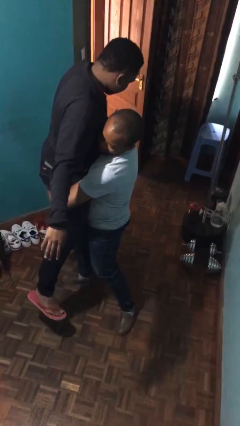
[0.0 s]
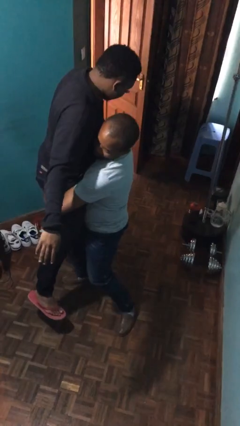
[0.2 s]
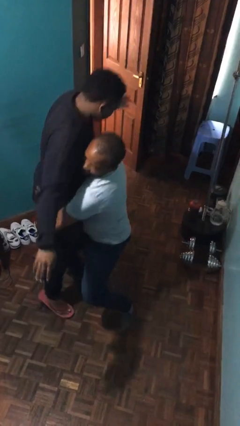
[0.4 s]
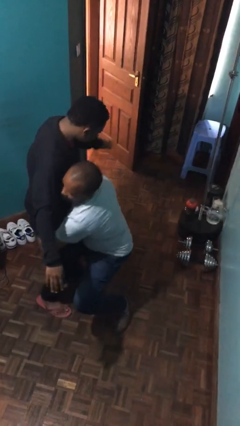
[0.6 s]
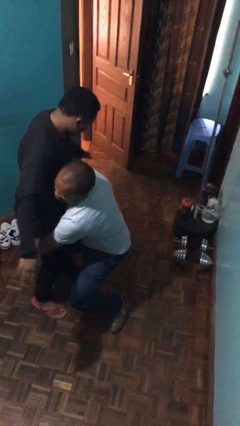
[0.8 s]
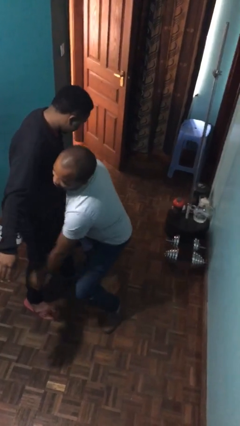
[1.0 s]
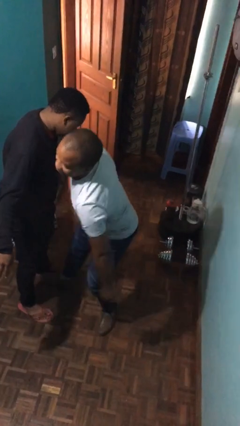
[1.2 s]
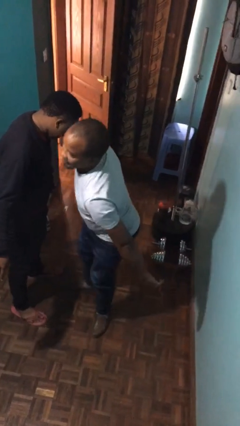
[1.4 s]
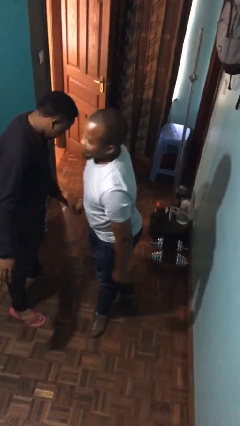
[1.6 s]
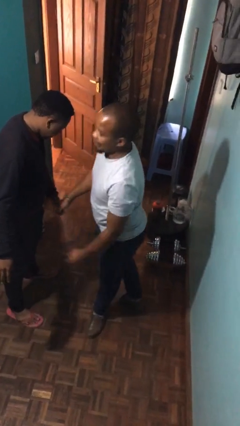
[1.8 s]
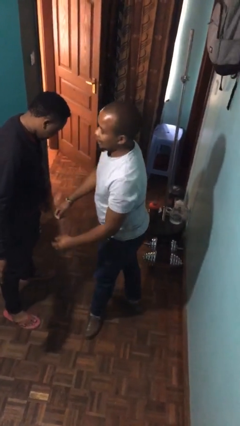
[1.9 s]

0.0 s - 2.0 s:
person puts down person

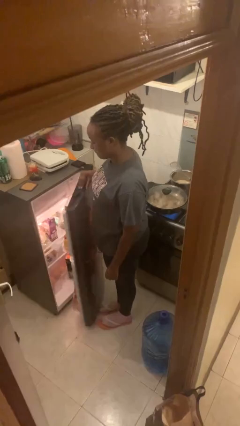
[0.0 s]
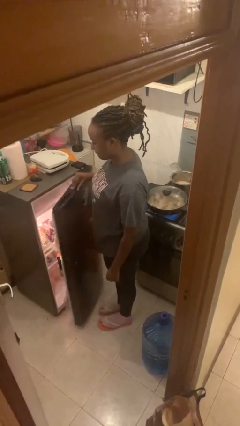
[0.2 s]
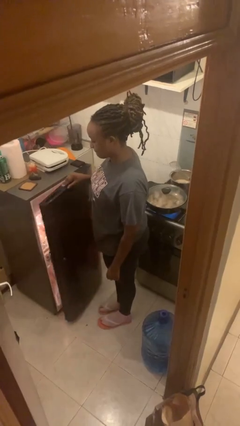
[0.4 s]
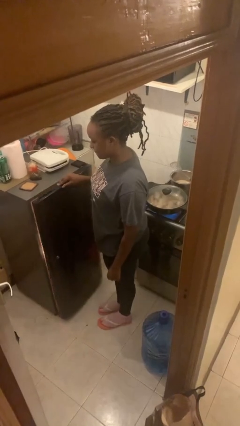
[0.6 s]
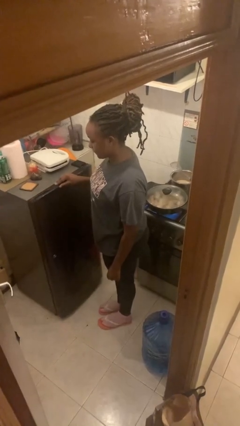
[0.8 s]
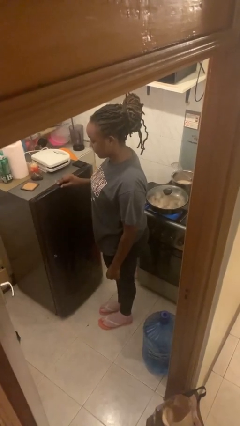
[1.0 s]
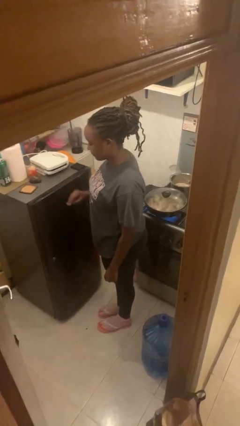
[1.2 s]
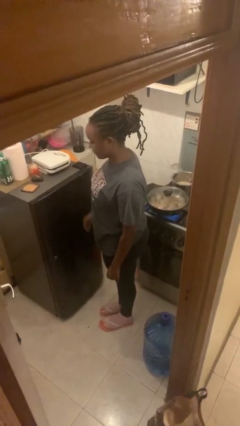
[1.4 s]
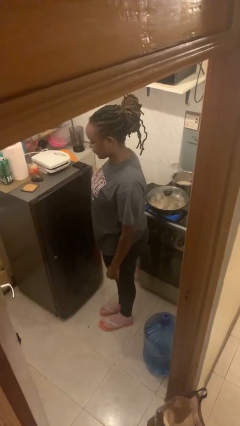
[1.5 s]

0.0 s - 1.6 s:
person closes refrigerator

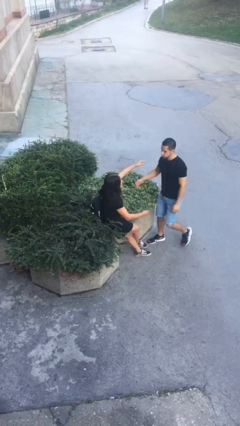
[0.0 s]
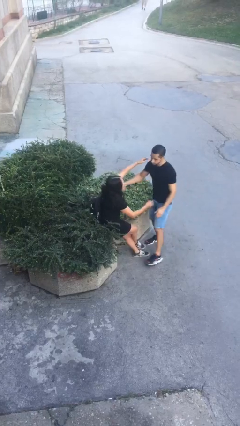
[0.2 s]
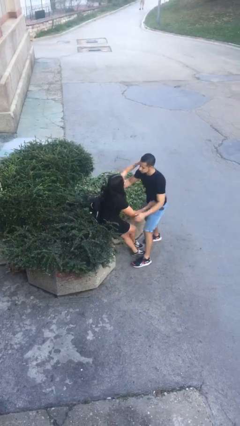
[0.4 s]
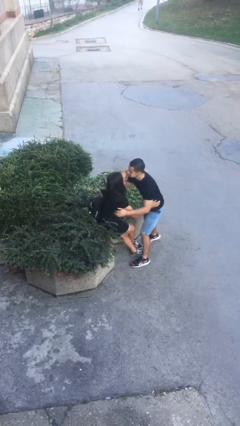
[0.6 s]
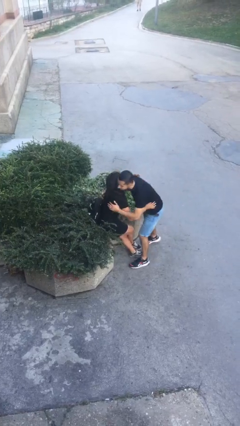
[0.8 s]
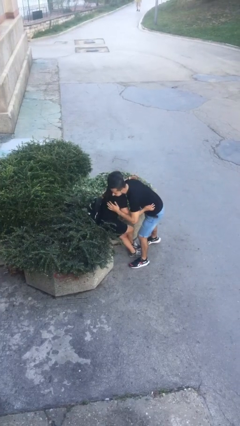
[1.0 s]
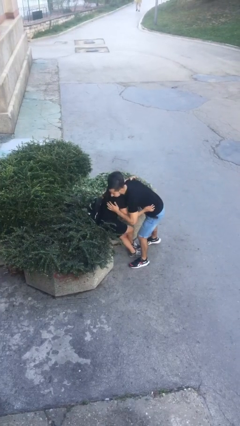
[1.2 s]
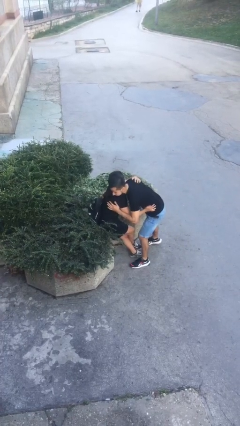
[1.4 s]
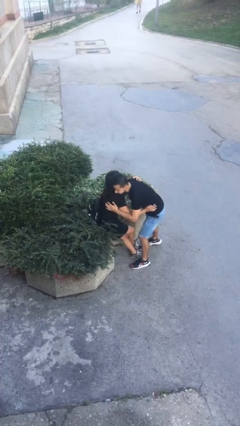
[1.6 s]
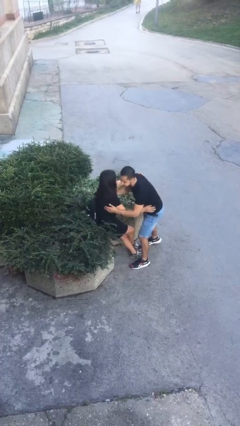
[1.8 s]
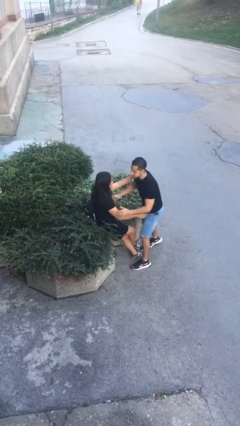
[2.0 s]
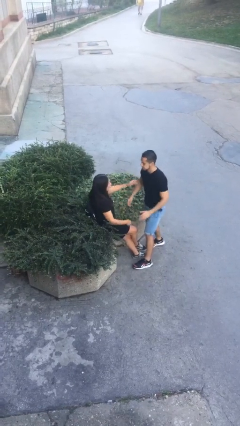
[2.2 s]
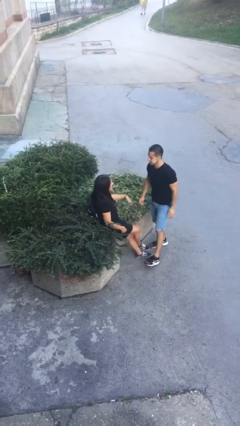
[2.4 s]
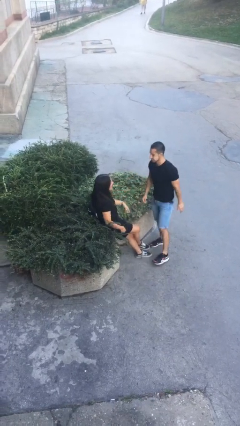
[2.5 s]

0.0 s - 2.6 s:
person embraces person

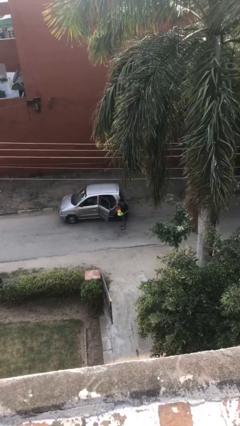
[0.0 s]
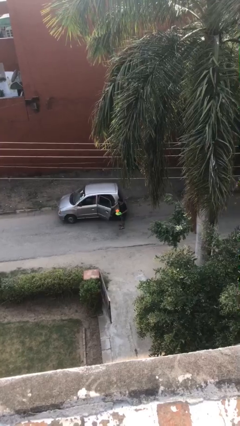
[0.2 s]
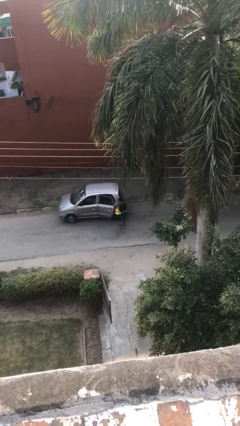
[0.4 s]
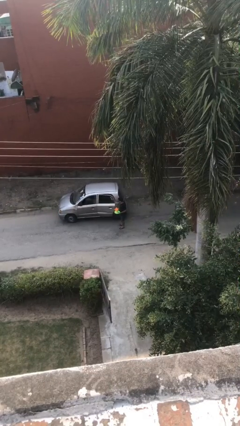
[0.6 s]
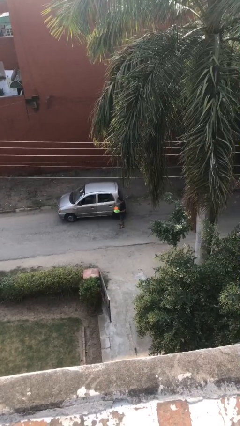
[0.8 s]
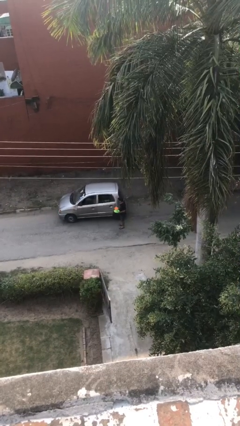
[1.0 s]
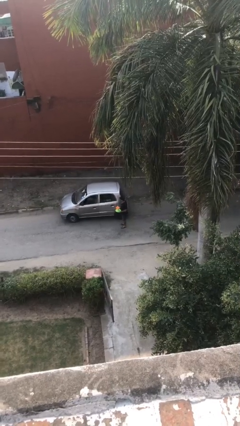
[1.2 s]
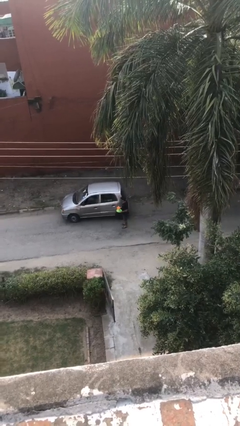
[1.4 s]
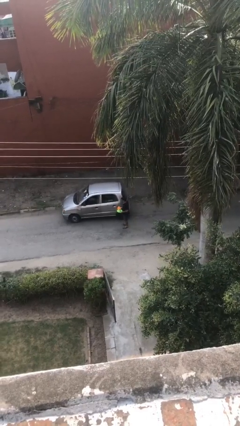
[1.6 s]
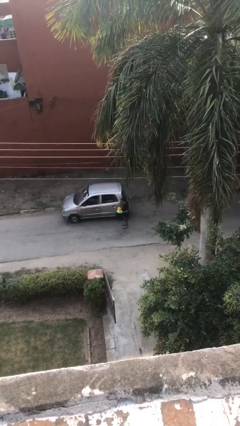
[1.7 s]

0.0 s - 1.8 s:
person closes car door

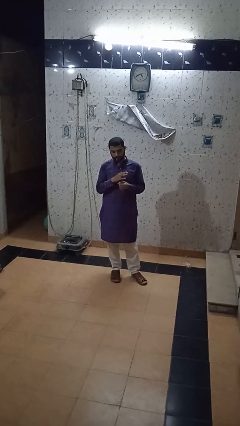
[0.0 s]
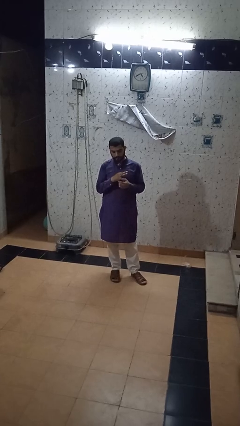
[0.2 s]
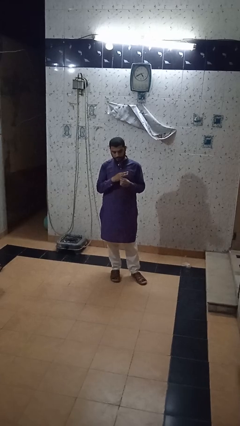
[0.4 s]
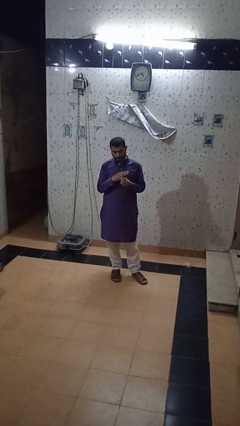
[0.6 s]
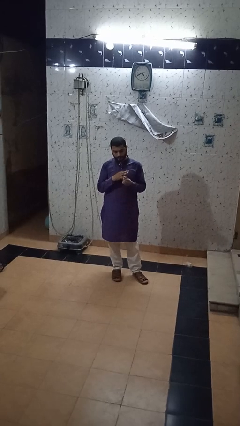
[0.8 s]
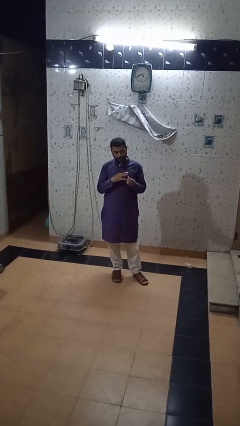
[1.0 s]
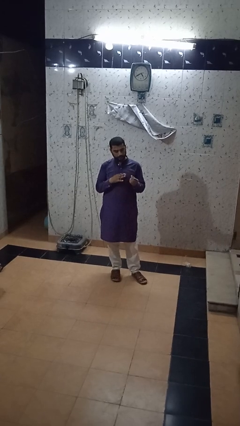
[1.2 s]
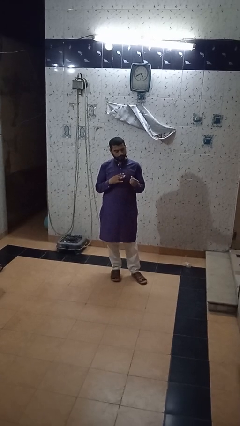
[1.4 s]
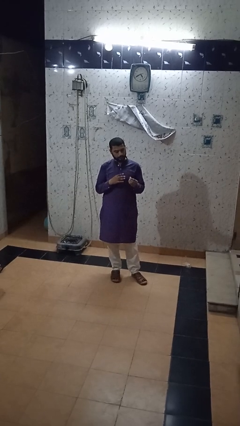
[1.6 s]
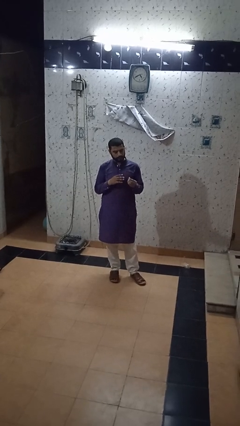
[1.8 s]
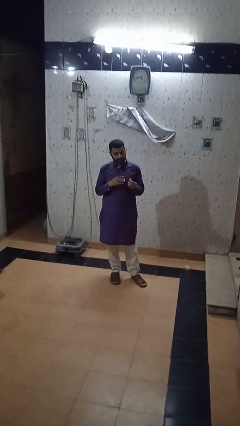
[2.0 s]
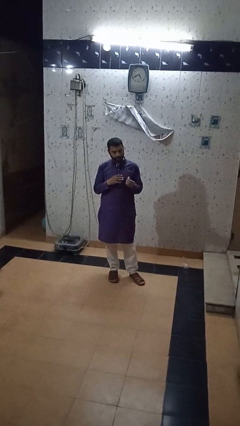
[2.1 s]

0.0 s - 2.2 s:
person takes off ring

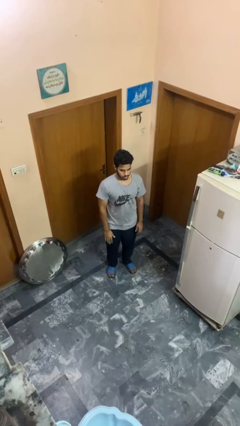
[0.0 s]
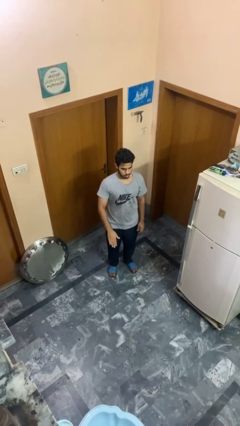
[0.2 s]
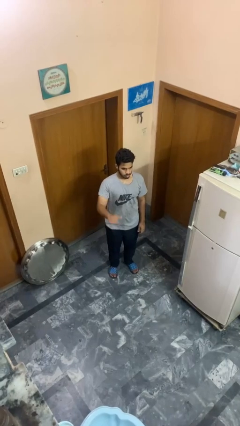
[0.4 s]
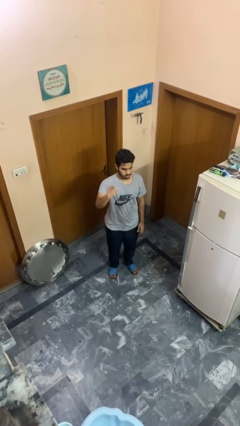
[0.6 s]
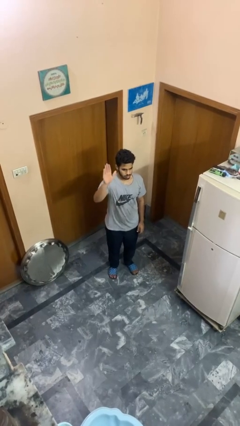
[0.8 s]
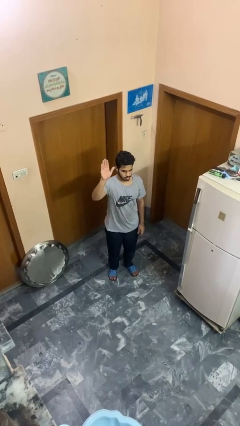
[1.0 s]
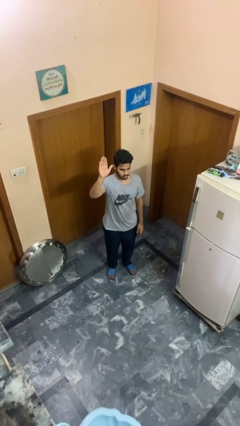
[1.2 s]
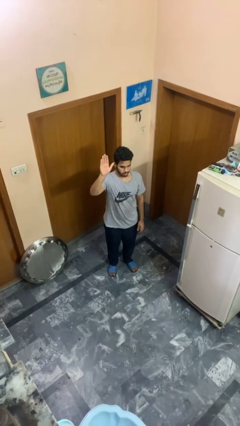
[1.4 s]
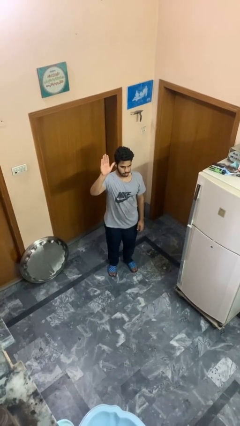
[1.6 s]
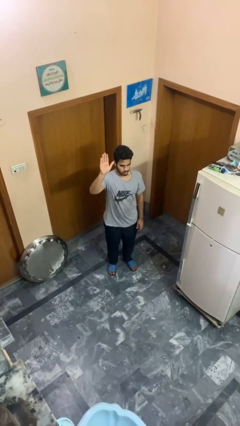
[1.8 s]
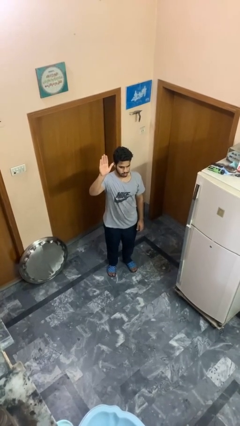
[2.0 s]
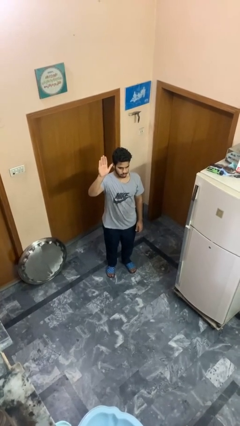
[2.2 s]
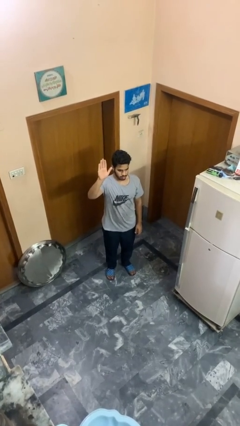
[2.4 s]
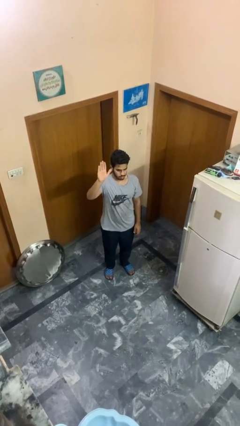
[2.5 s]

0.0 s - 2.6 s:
person gestures raise hand

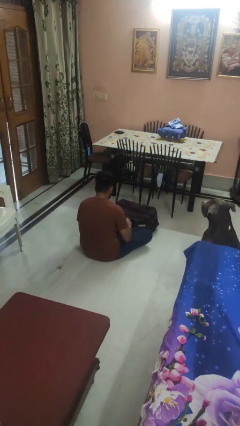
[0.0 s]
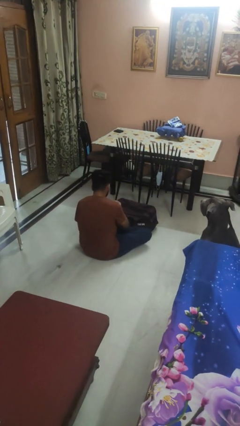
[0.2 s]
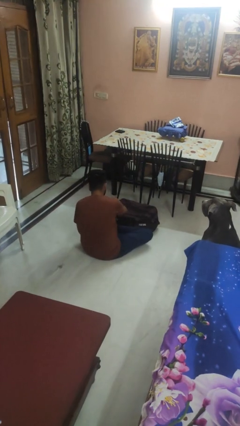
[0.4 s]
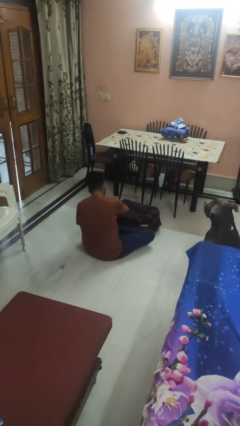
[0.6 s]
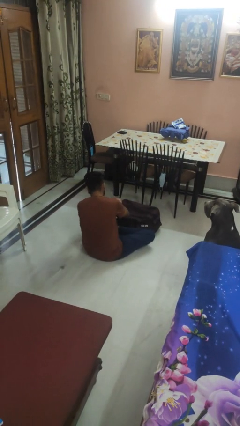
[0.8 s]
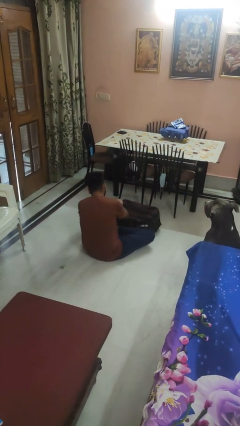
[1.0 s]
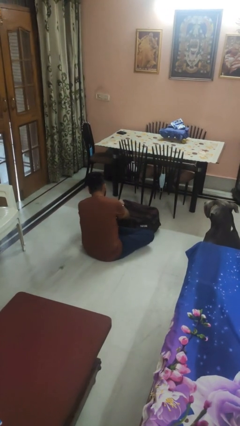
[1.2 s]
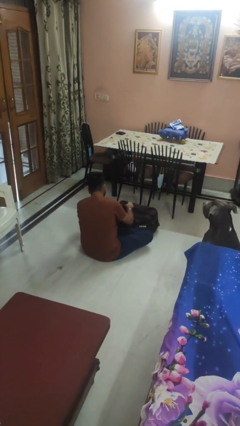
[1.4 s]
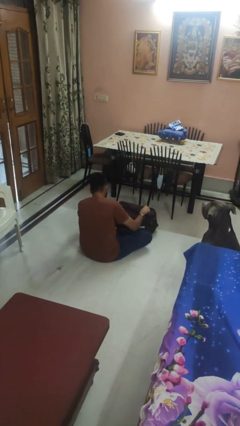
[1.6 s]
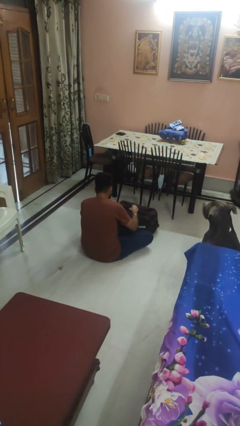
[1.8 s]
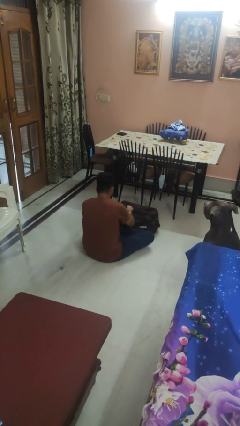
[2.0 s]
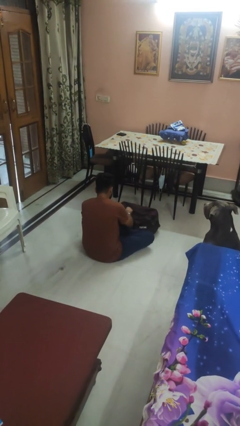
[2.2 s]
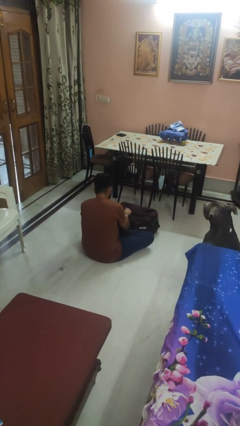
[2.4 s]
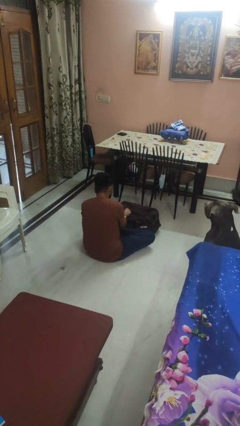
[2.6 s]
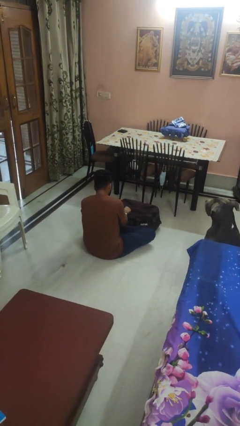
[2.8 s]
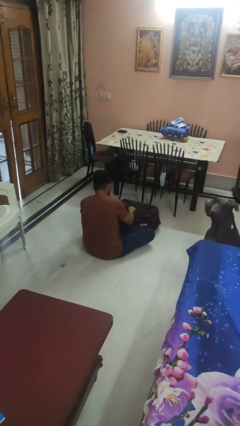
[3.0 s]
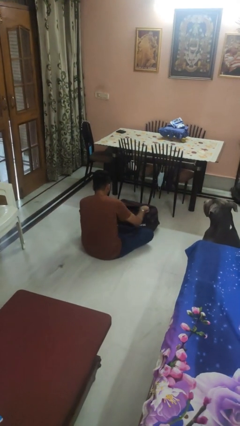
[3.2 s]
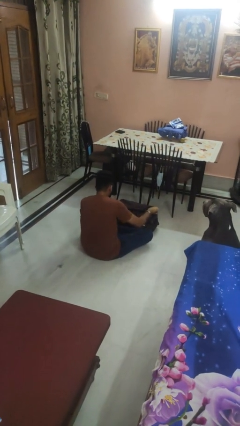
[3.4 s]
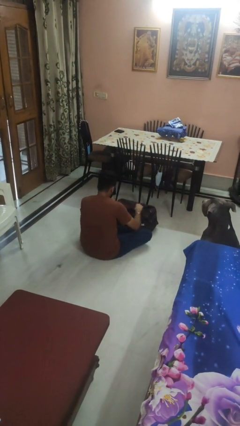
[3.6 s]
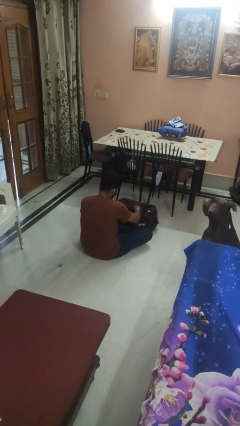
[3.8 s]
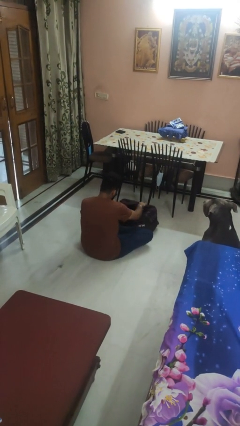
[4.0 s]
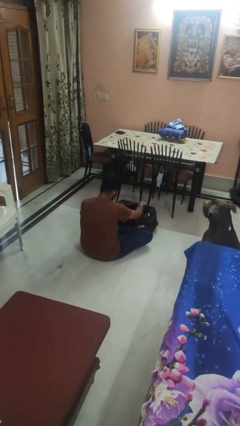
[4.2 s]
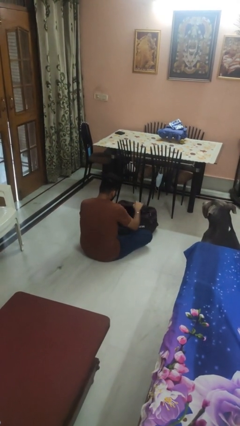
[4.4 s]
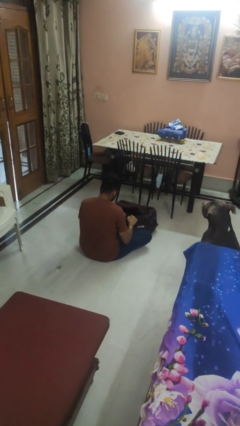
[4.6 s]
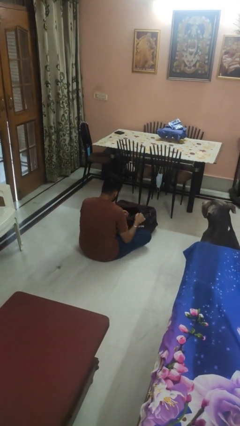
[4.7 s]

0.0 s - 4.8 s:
person opens suitcase
